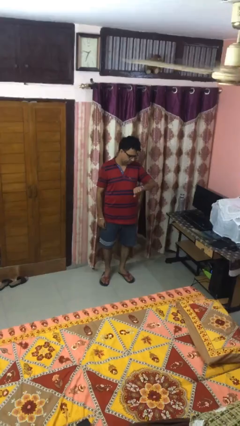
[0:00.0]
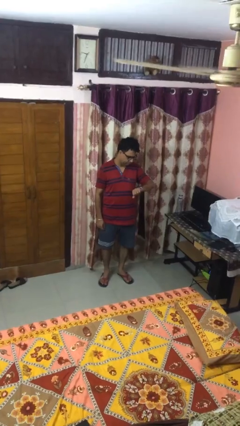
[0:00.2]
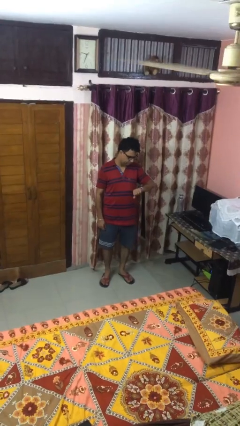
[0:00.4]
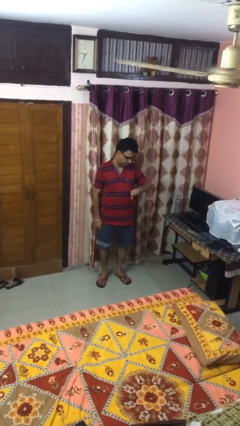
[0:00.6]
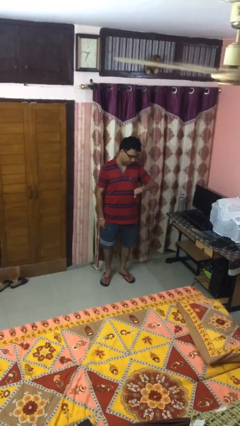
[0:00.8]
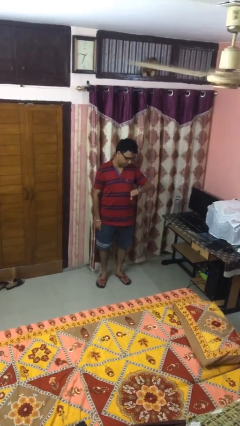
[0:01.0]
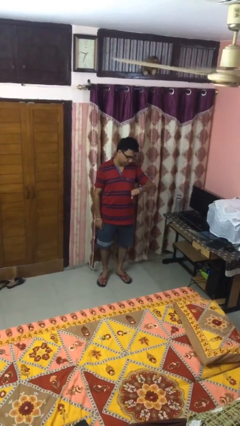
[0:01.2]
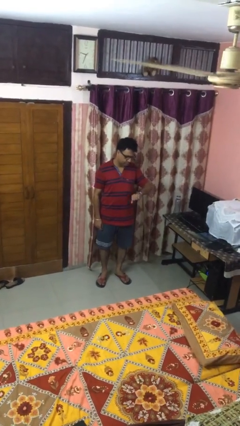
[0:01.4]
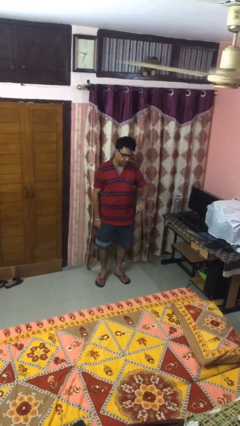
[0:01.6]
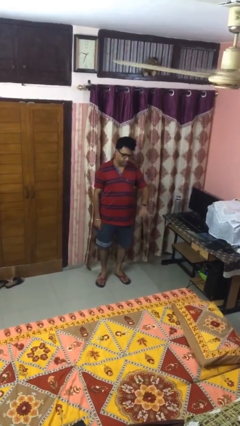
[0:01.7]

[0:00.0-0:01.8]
person looks at wristwatch

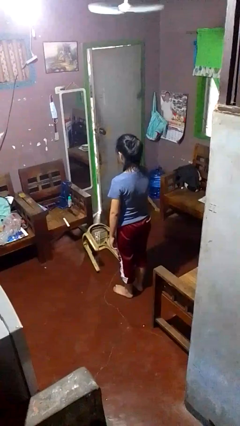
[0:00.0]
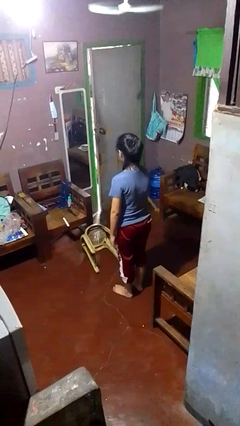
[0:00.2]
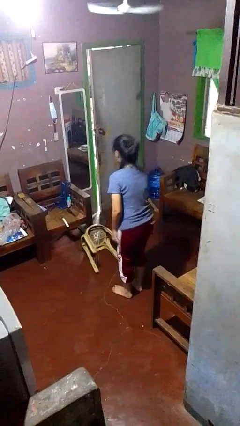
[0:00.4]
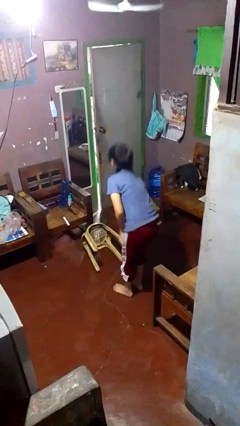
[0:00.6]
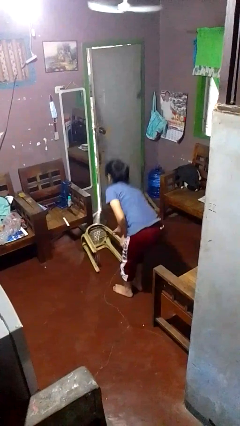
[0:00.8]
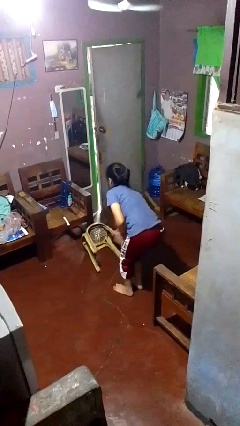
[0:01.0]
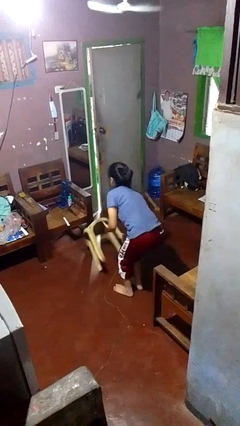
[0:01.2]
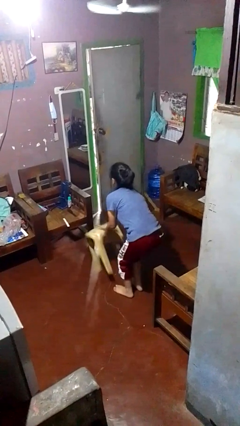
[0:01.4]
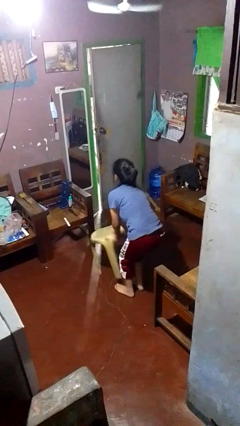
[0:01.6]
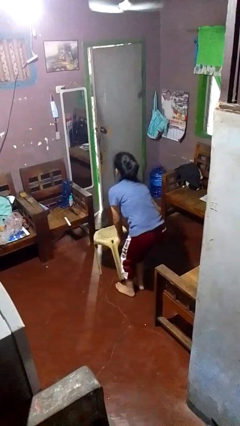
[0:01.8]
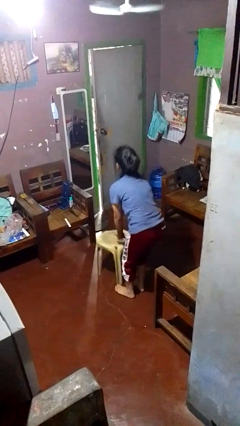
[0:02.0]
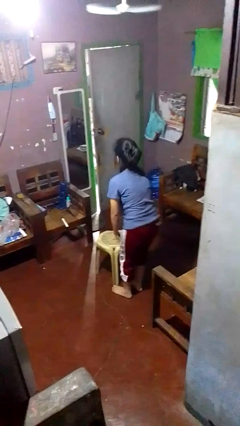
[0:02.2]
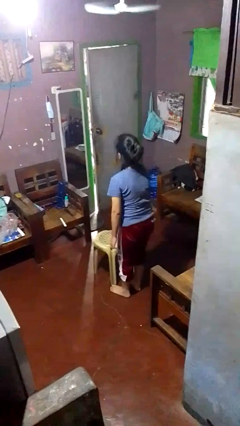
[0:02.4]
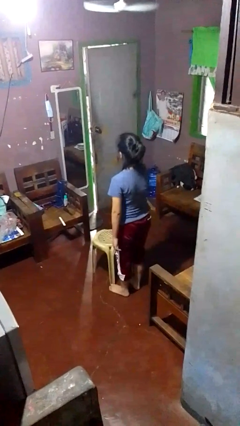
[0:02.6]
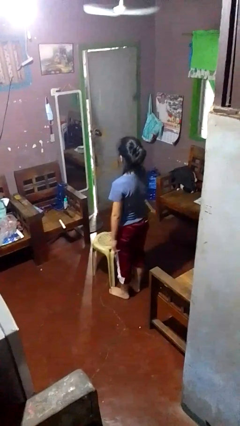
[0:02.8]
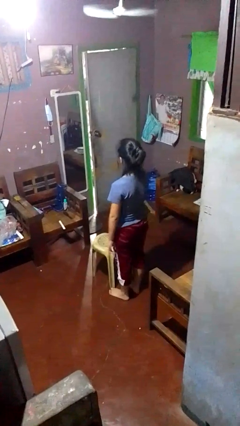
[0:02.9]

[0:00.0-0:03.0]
person sets upright furniture

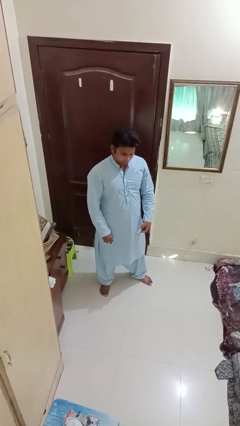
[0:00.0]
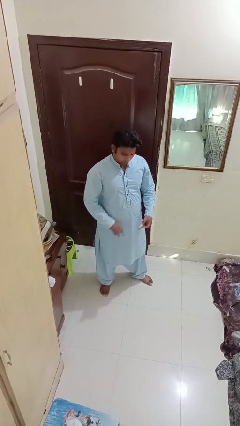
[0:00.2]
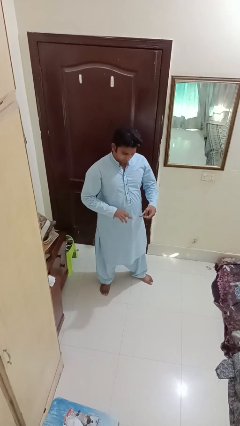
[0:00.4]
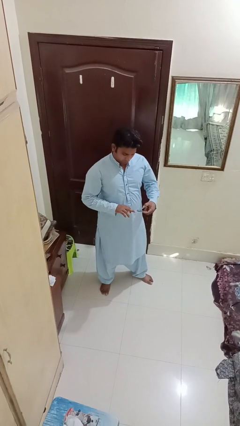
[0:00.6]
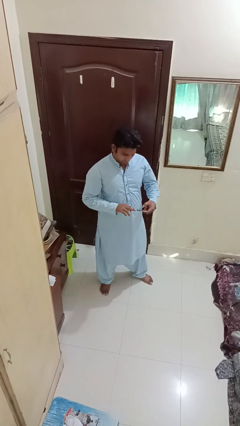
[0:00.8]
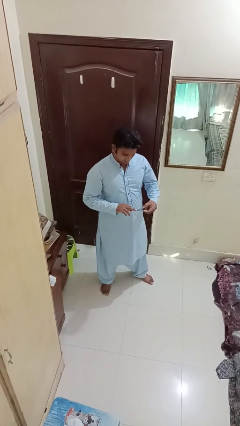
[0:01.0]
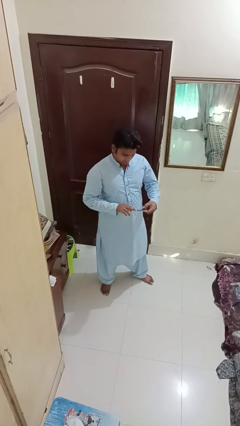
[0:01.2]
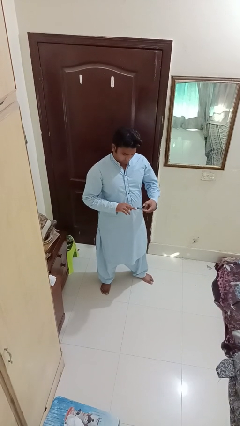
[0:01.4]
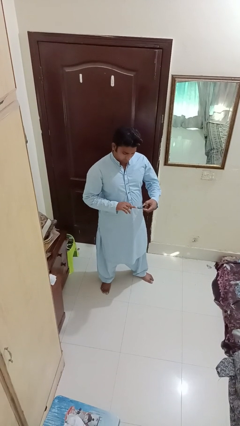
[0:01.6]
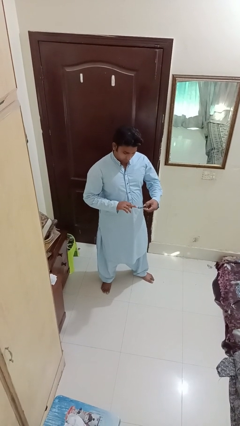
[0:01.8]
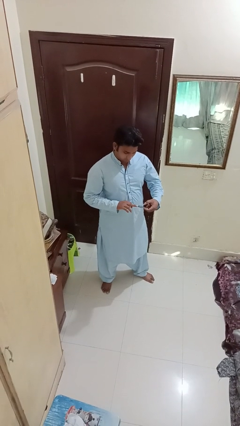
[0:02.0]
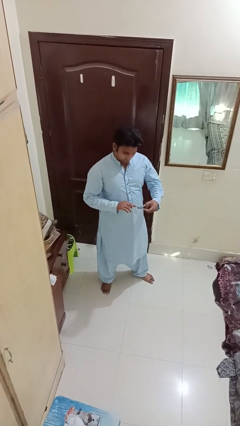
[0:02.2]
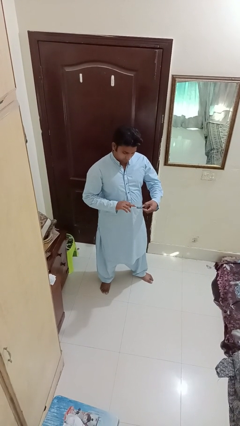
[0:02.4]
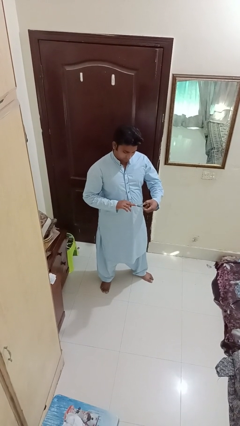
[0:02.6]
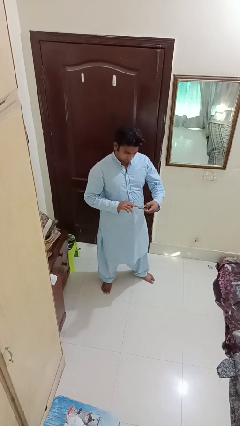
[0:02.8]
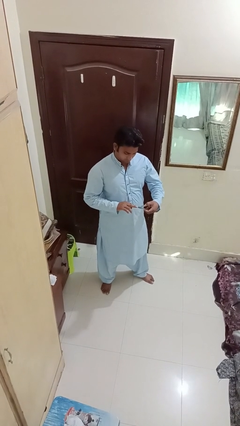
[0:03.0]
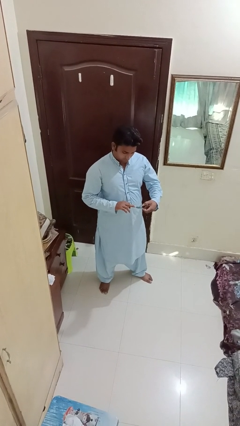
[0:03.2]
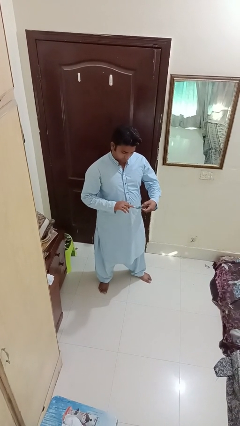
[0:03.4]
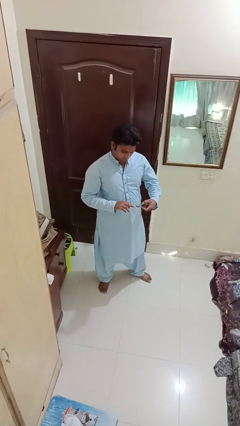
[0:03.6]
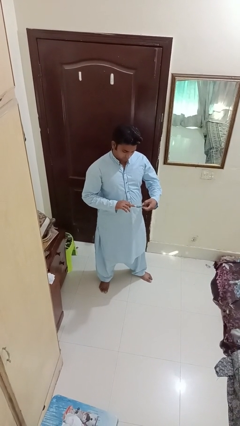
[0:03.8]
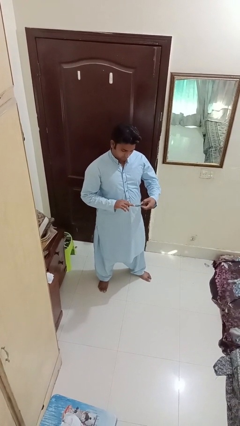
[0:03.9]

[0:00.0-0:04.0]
person clips fingernails

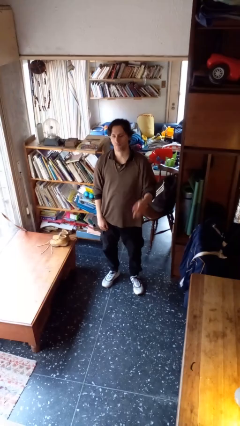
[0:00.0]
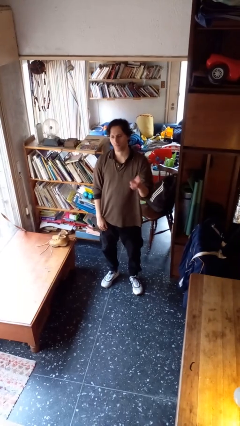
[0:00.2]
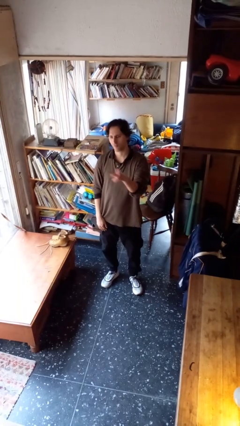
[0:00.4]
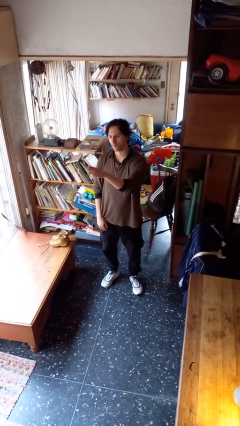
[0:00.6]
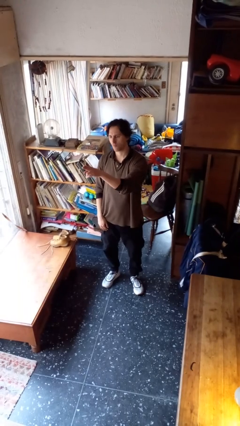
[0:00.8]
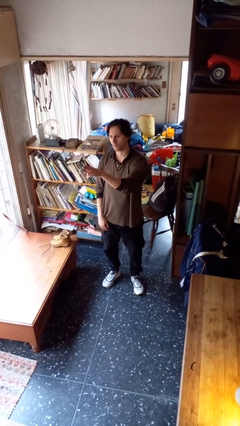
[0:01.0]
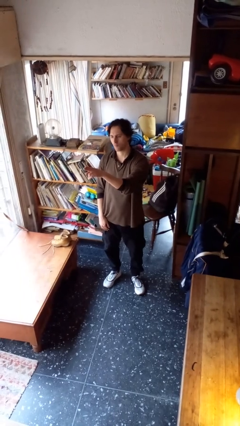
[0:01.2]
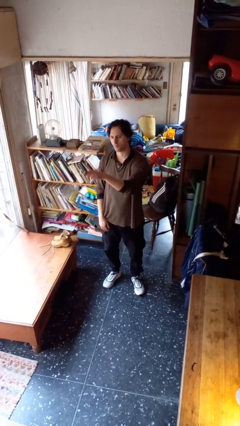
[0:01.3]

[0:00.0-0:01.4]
person gestures swipe right

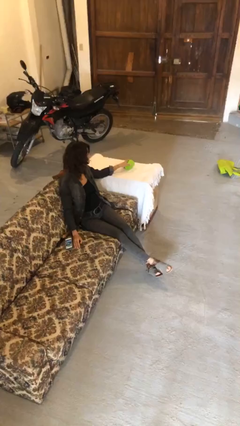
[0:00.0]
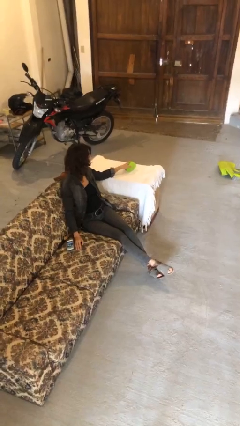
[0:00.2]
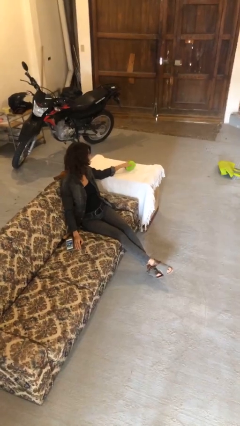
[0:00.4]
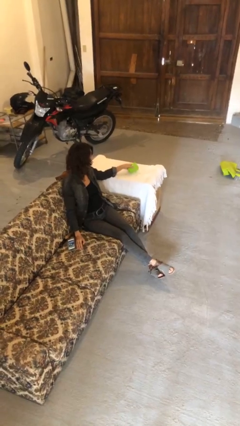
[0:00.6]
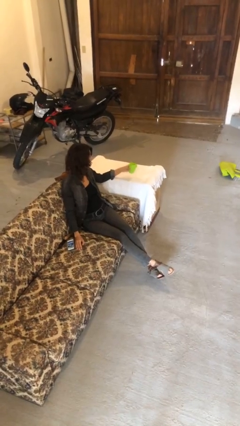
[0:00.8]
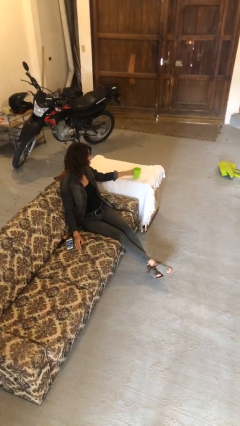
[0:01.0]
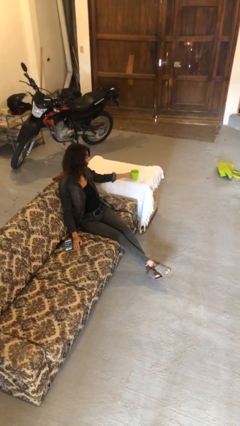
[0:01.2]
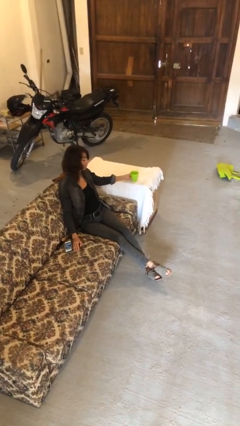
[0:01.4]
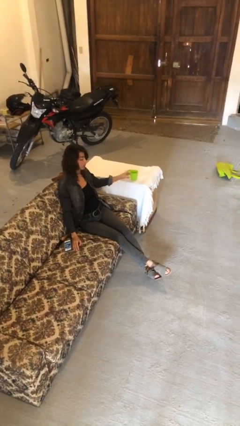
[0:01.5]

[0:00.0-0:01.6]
person sets upright glass

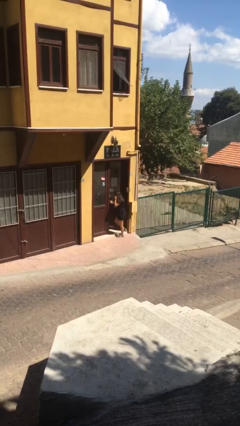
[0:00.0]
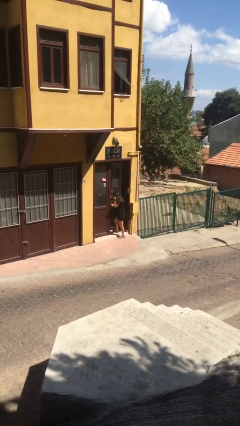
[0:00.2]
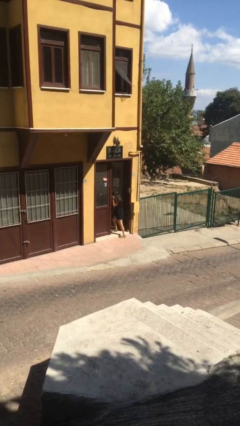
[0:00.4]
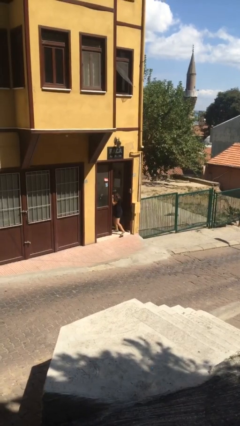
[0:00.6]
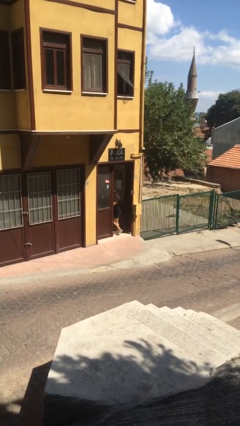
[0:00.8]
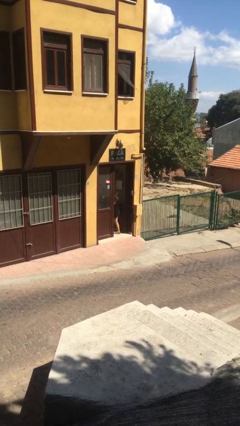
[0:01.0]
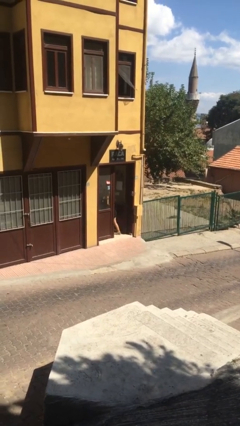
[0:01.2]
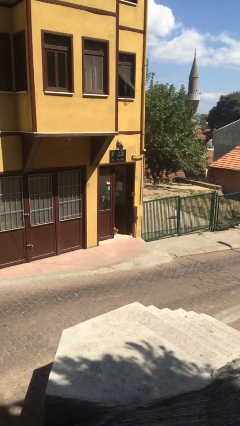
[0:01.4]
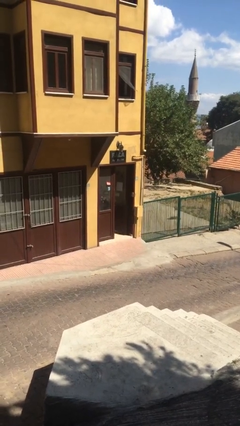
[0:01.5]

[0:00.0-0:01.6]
person exits scene through structure

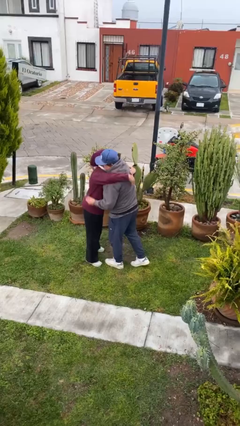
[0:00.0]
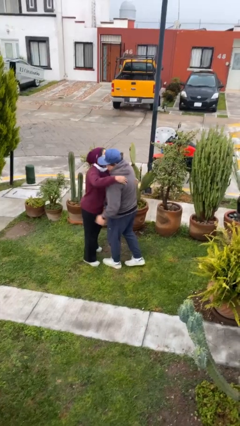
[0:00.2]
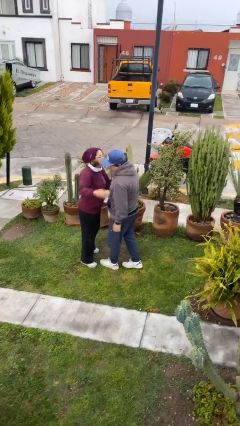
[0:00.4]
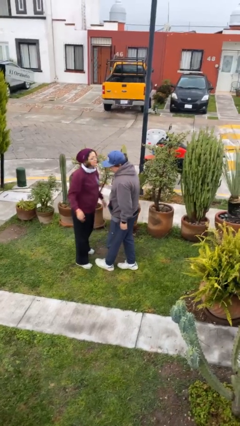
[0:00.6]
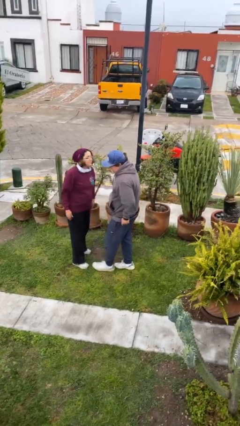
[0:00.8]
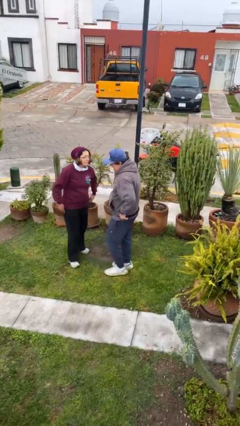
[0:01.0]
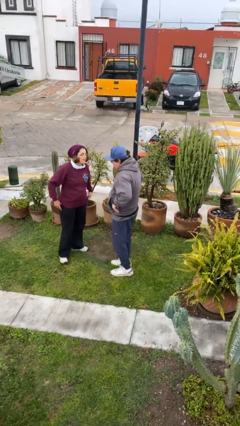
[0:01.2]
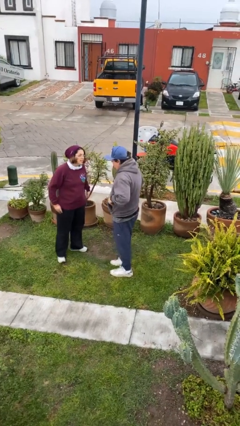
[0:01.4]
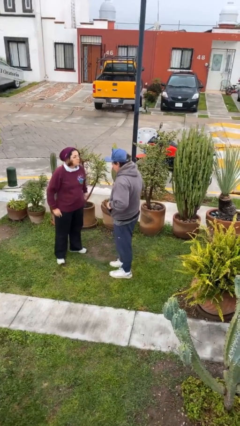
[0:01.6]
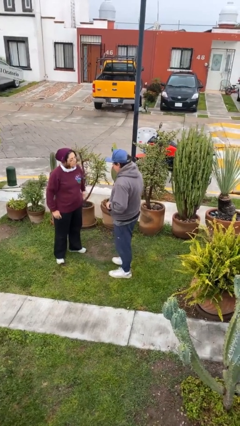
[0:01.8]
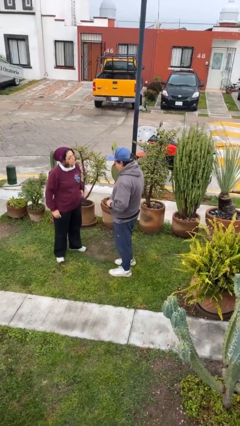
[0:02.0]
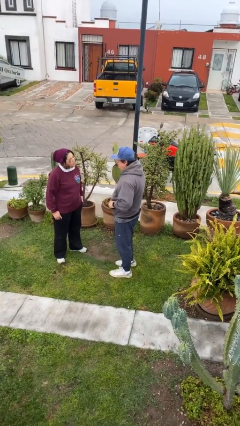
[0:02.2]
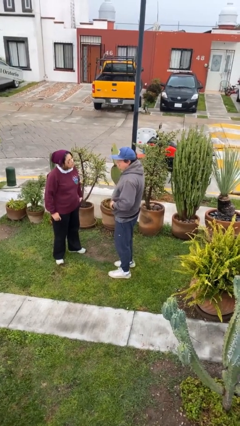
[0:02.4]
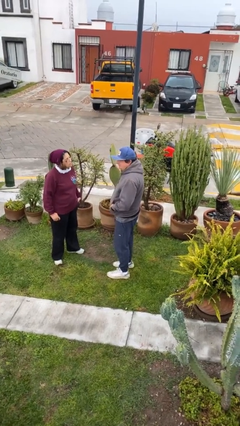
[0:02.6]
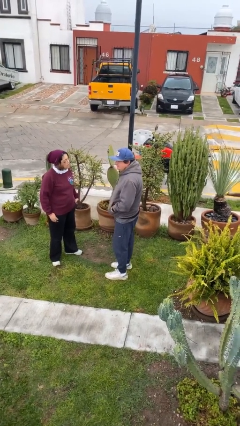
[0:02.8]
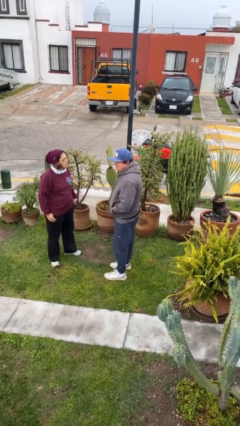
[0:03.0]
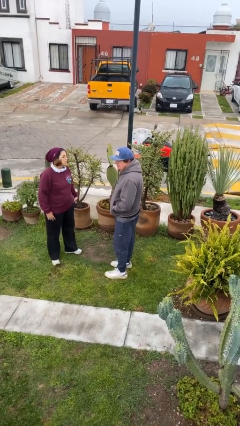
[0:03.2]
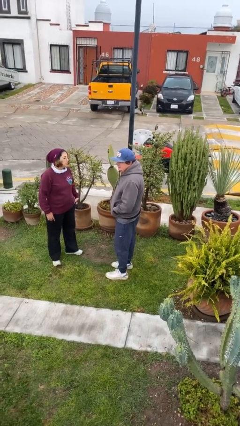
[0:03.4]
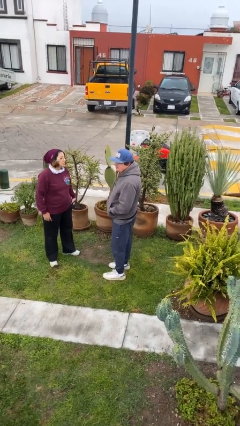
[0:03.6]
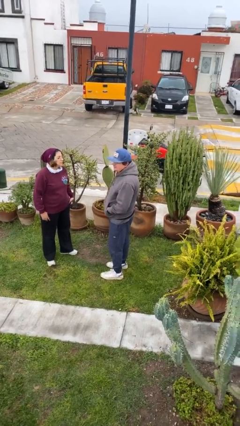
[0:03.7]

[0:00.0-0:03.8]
person talks to person
